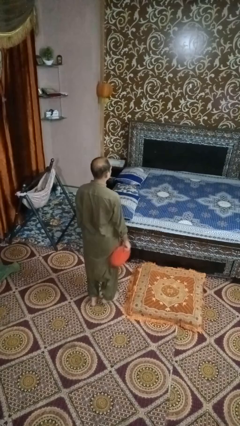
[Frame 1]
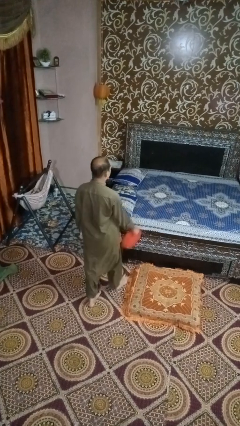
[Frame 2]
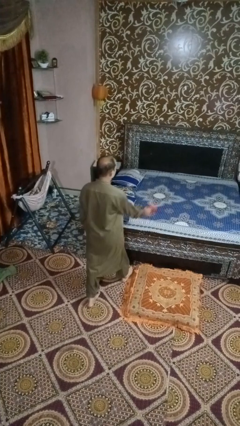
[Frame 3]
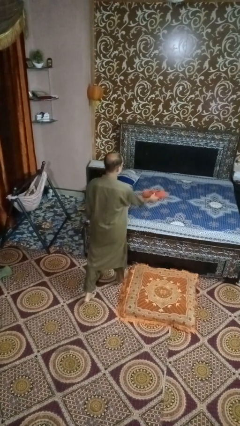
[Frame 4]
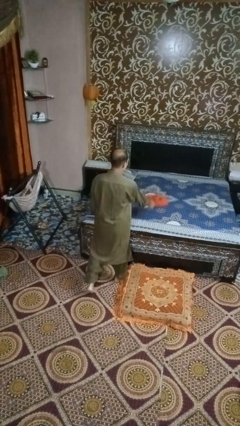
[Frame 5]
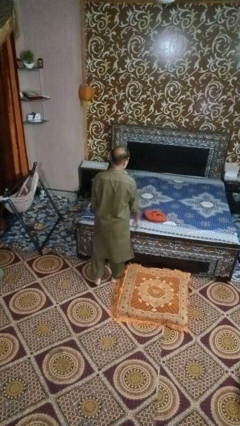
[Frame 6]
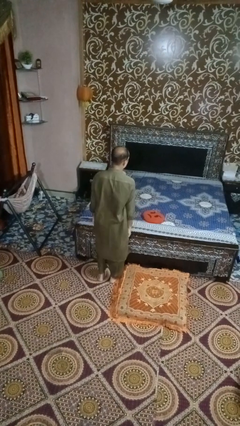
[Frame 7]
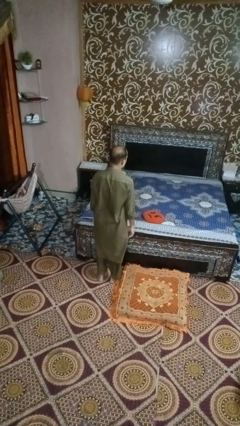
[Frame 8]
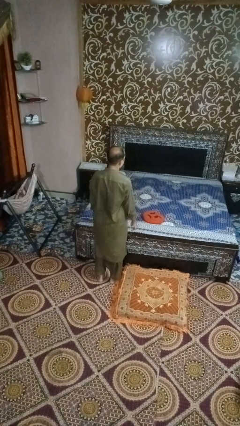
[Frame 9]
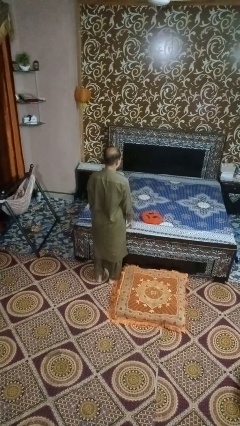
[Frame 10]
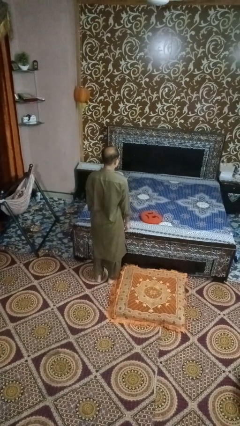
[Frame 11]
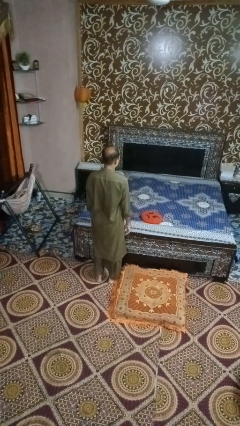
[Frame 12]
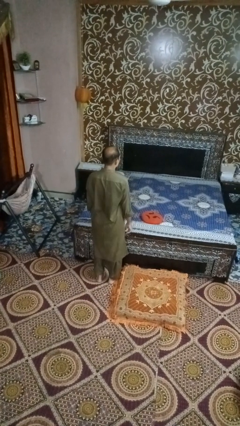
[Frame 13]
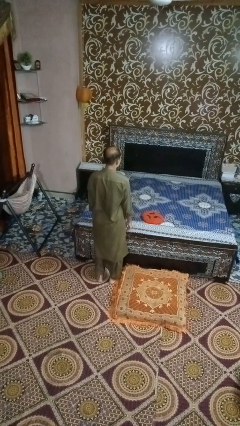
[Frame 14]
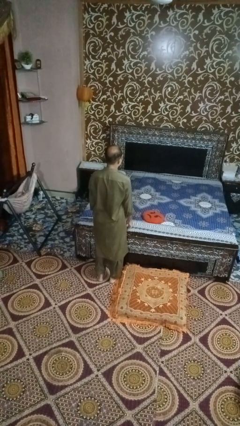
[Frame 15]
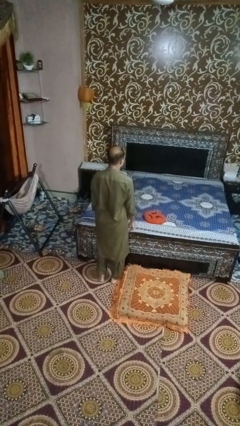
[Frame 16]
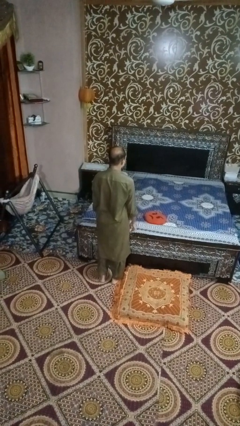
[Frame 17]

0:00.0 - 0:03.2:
person throws object on bed

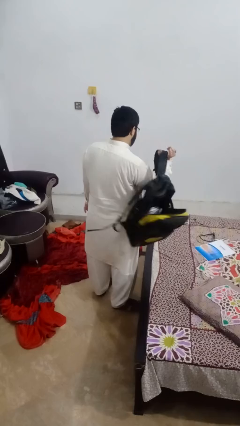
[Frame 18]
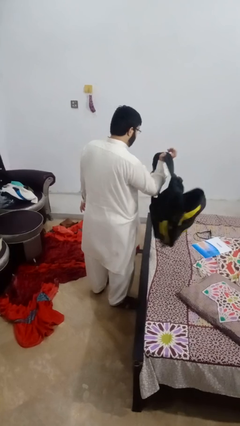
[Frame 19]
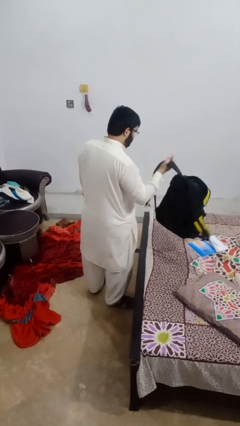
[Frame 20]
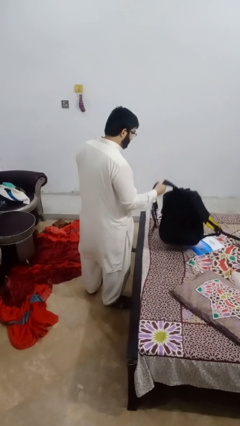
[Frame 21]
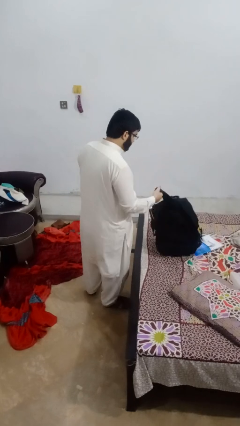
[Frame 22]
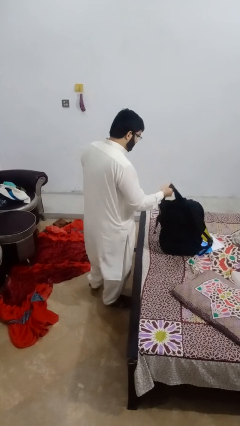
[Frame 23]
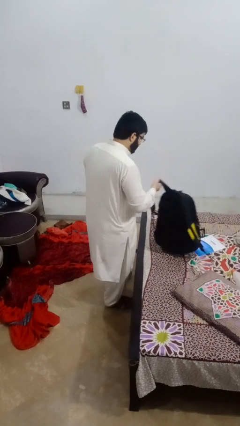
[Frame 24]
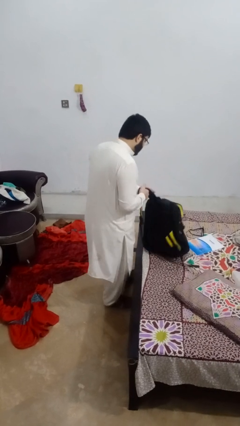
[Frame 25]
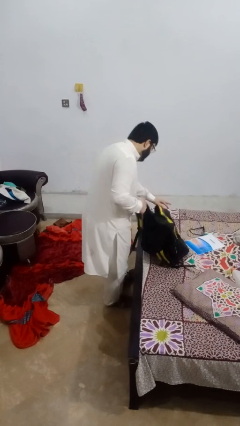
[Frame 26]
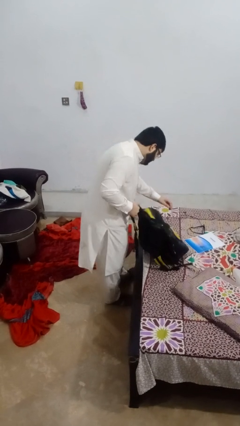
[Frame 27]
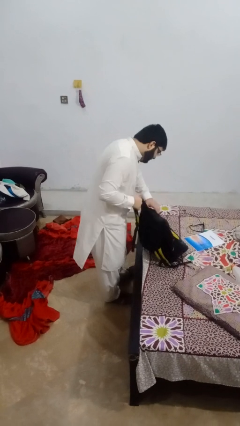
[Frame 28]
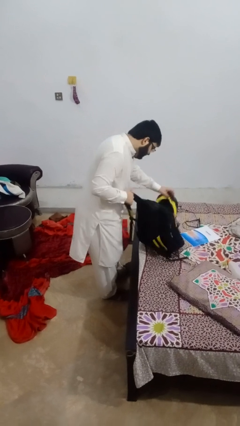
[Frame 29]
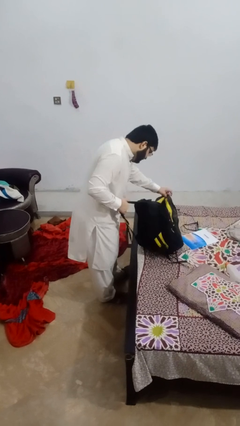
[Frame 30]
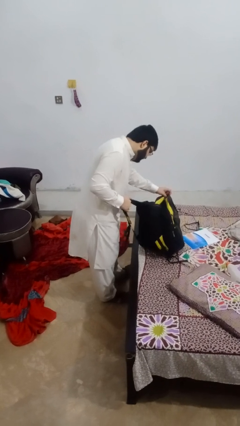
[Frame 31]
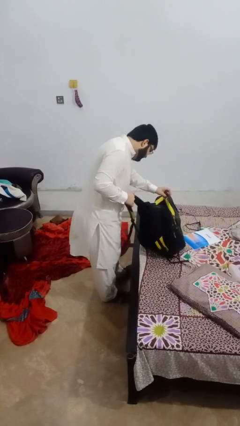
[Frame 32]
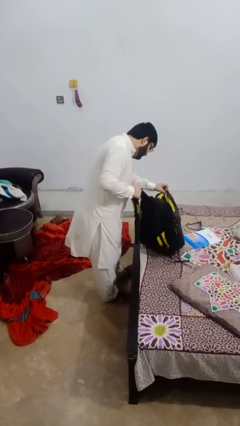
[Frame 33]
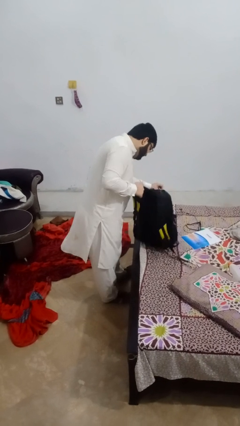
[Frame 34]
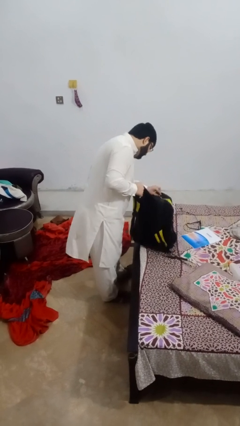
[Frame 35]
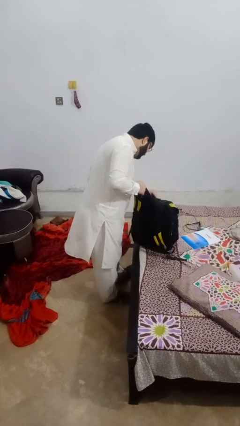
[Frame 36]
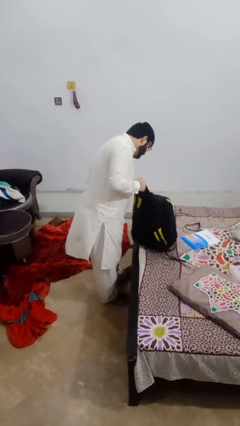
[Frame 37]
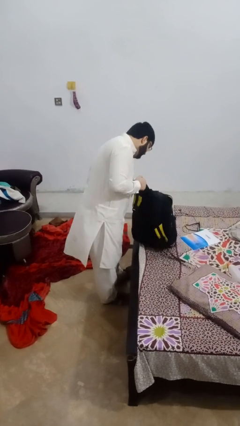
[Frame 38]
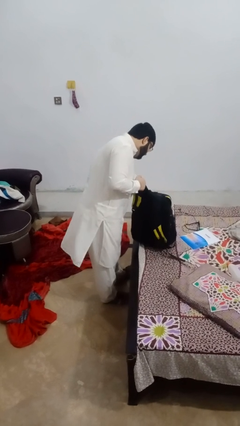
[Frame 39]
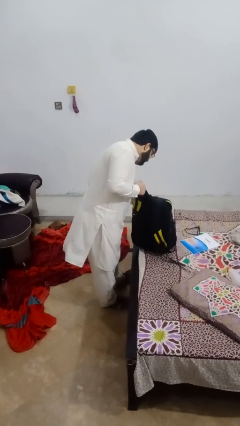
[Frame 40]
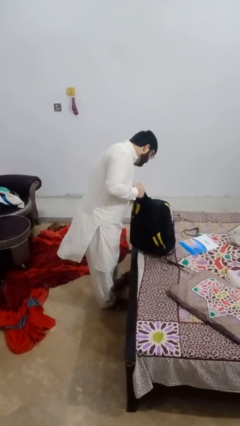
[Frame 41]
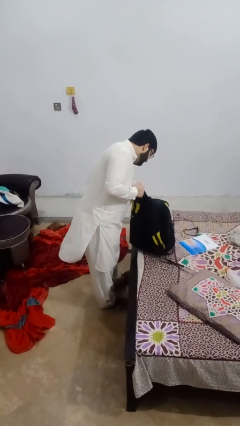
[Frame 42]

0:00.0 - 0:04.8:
person searches in backpack

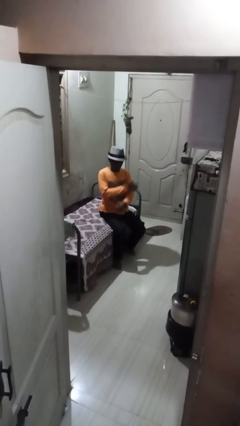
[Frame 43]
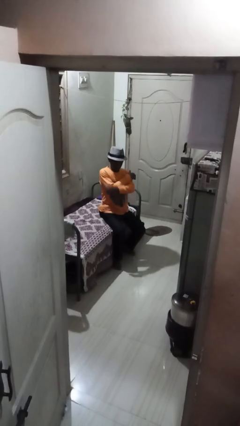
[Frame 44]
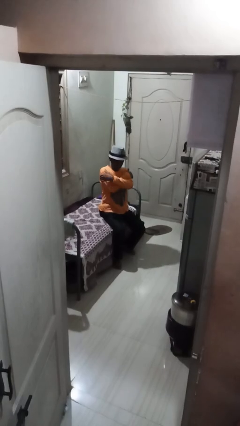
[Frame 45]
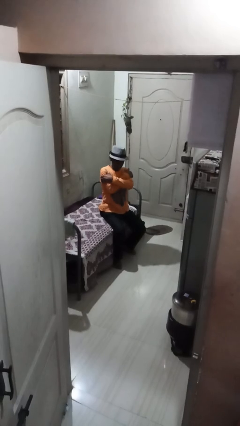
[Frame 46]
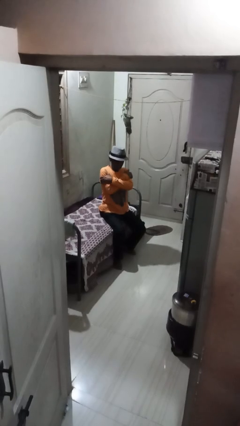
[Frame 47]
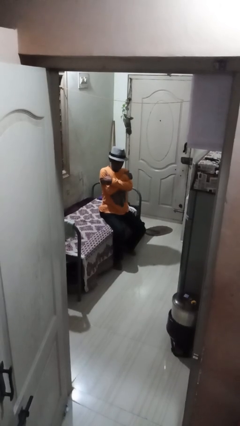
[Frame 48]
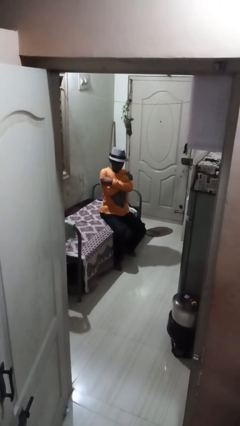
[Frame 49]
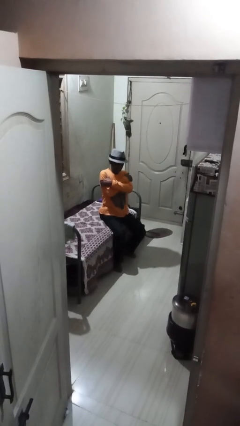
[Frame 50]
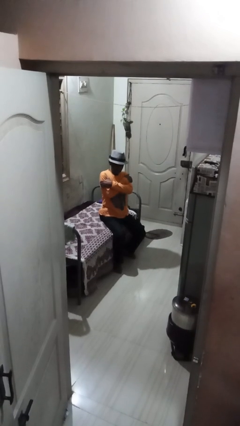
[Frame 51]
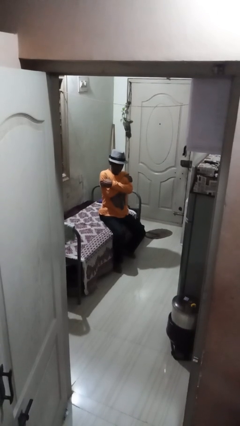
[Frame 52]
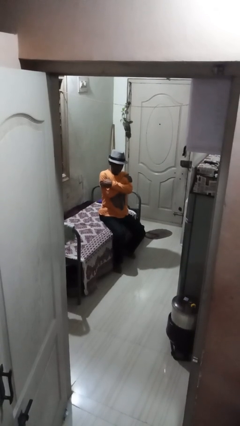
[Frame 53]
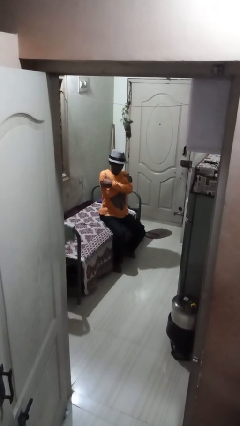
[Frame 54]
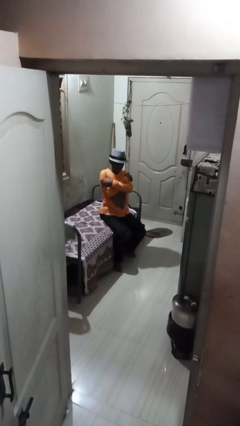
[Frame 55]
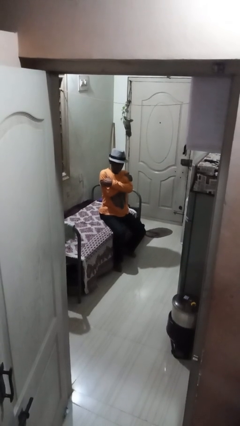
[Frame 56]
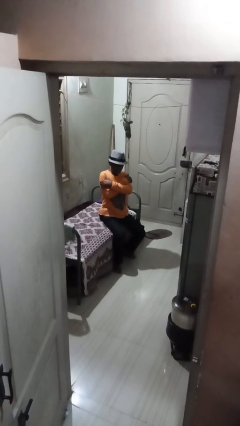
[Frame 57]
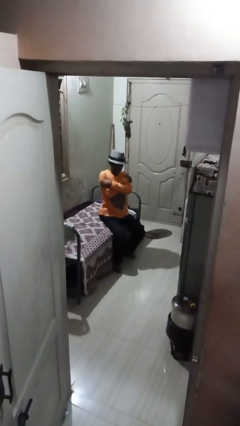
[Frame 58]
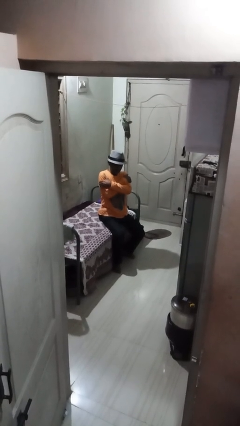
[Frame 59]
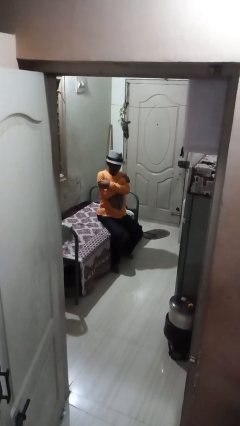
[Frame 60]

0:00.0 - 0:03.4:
person crosses arms

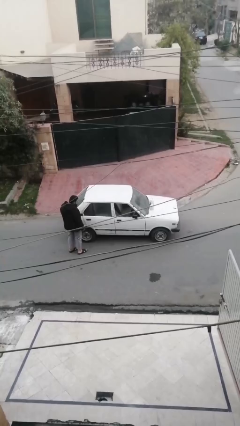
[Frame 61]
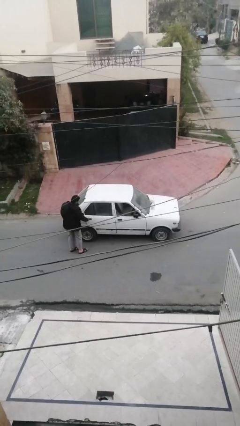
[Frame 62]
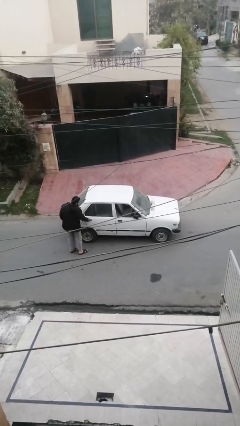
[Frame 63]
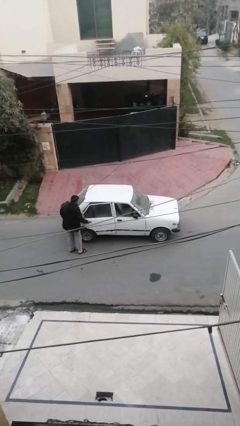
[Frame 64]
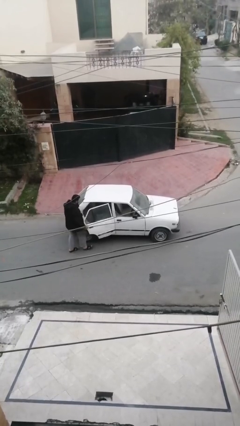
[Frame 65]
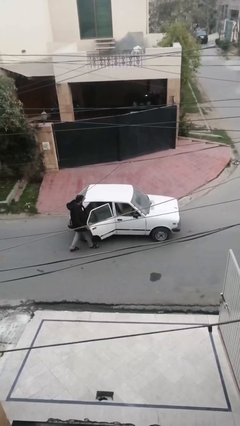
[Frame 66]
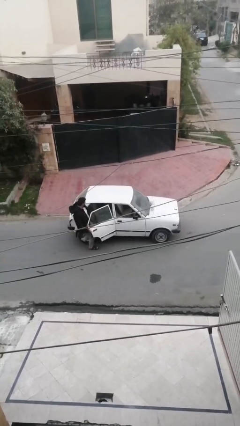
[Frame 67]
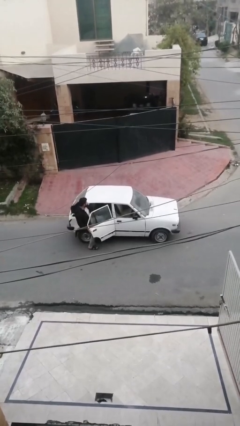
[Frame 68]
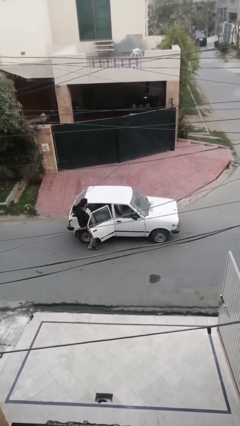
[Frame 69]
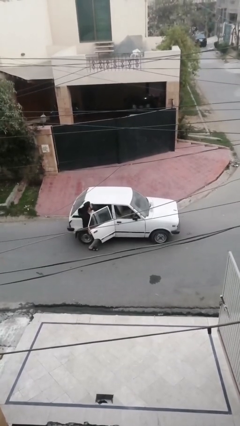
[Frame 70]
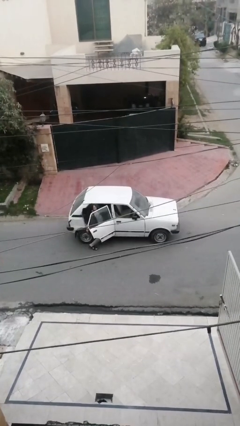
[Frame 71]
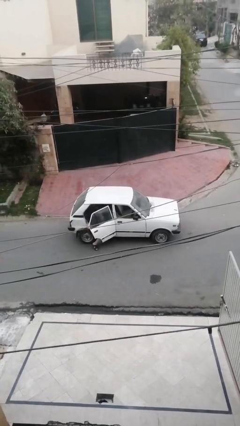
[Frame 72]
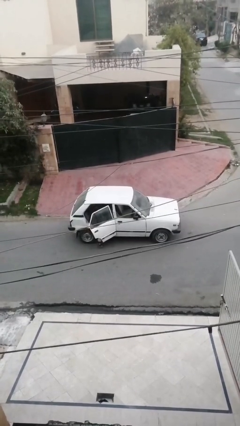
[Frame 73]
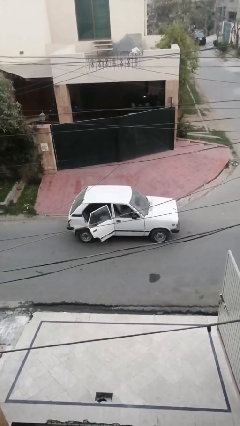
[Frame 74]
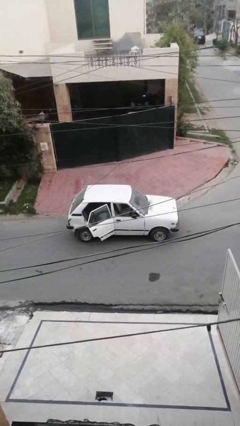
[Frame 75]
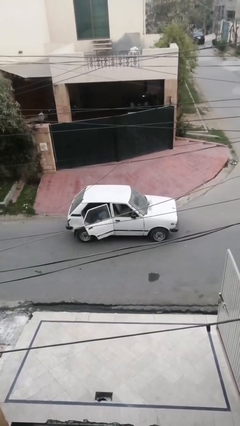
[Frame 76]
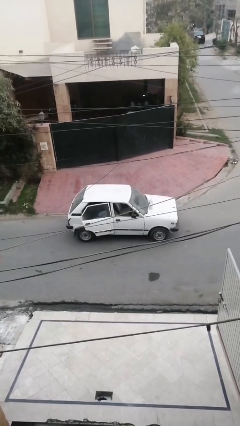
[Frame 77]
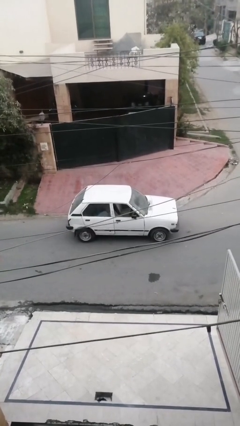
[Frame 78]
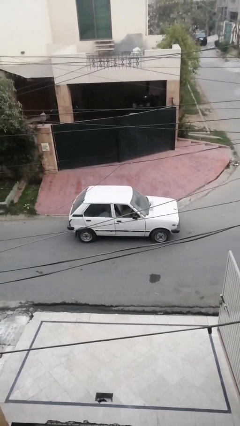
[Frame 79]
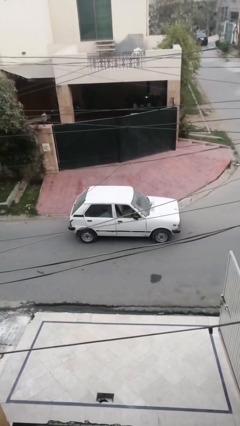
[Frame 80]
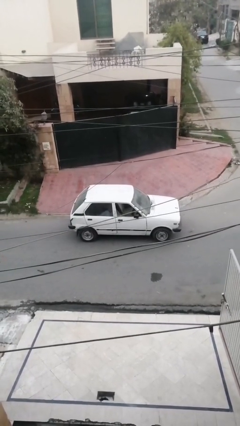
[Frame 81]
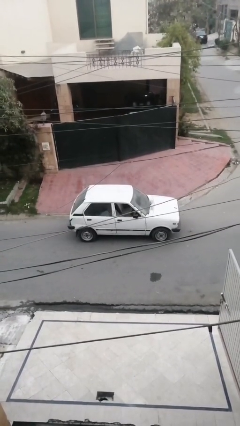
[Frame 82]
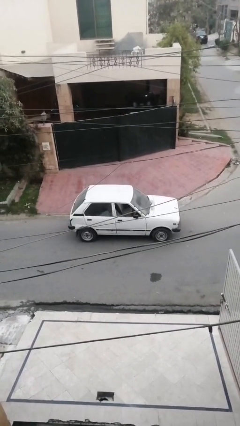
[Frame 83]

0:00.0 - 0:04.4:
car picks up person

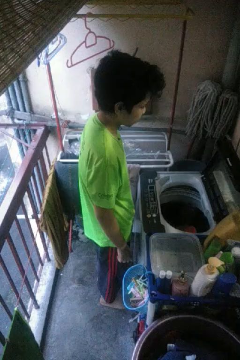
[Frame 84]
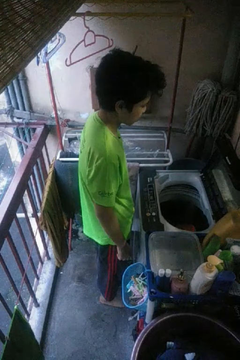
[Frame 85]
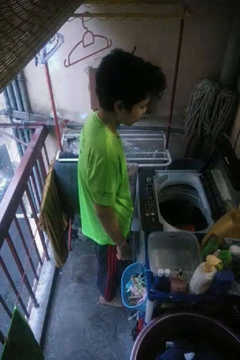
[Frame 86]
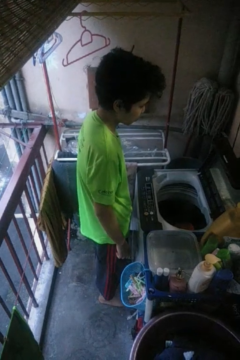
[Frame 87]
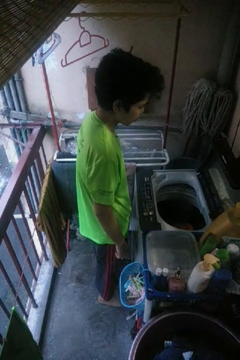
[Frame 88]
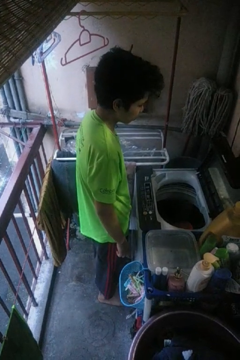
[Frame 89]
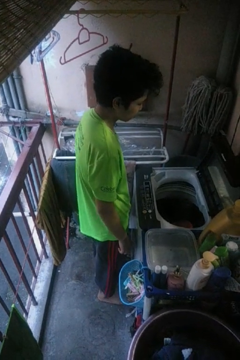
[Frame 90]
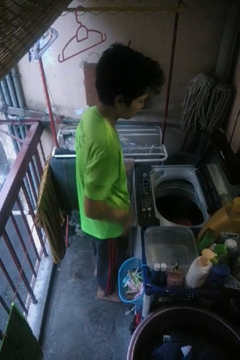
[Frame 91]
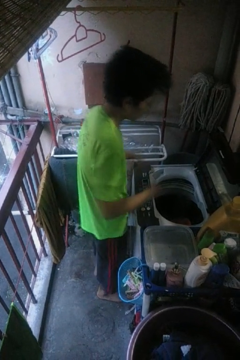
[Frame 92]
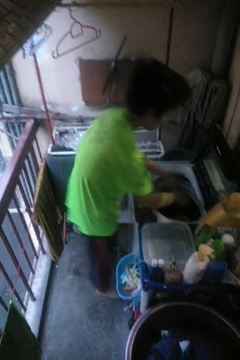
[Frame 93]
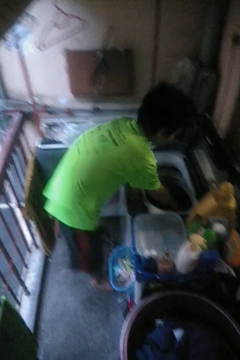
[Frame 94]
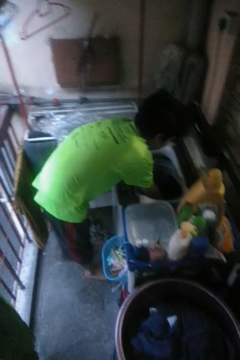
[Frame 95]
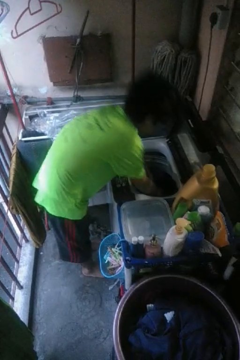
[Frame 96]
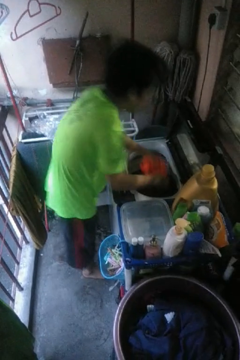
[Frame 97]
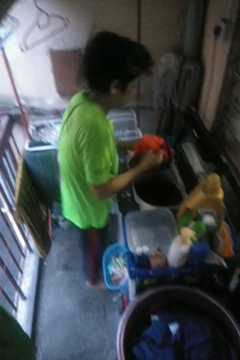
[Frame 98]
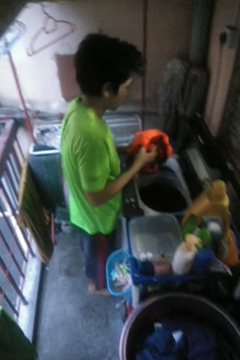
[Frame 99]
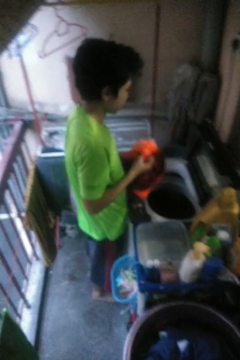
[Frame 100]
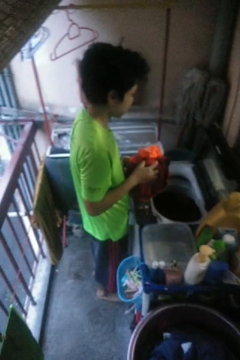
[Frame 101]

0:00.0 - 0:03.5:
person unloads clotheswasher
